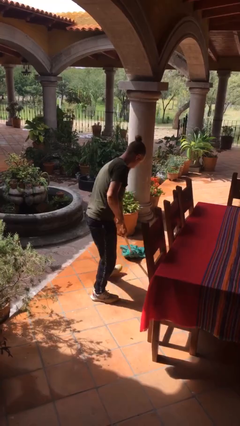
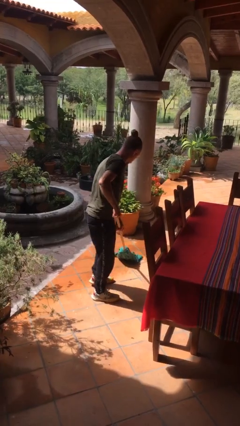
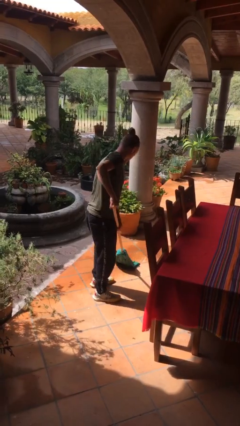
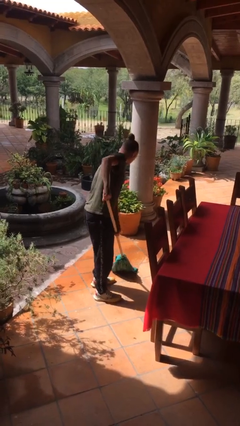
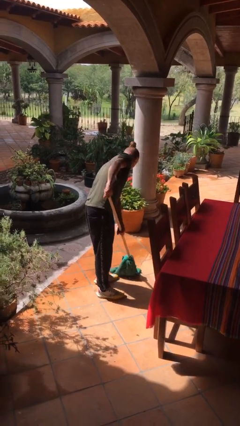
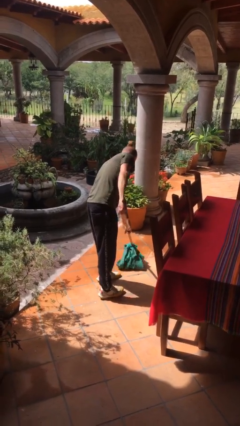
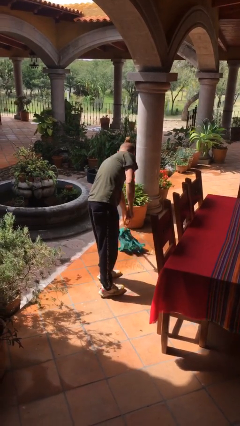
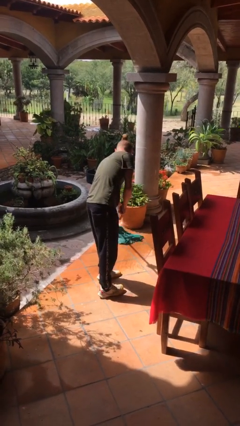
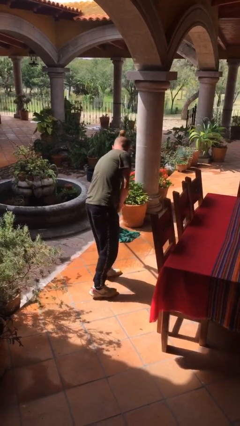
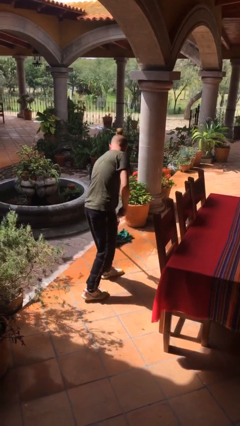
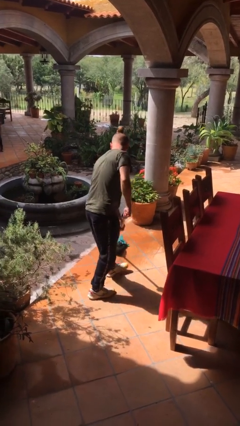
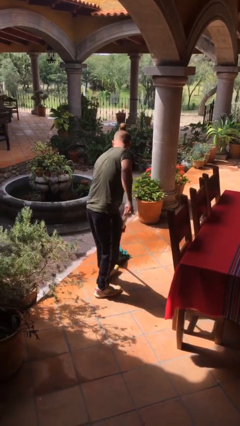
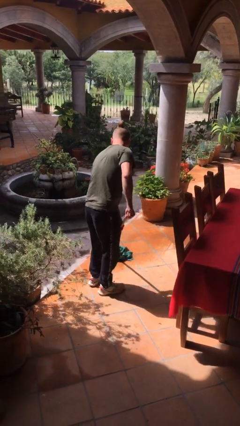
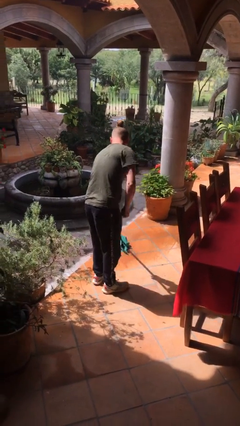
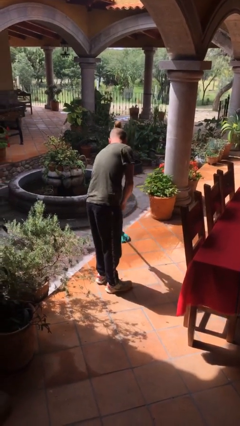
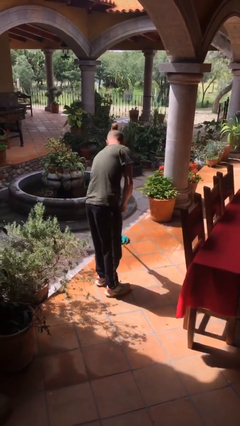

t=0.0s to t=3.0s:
person mops

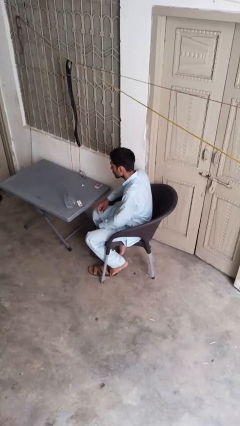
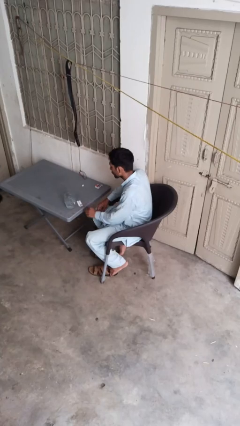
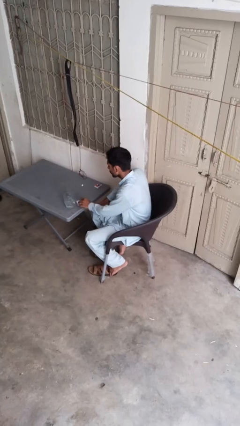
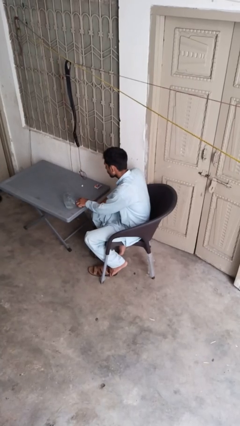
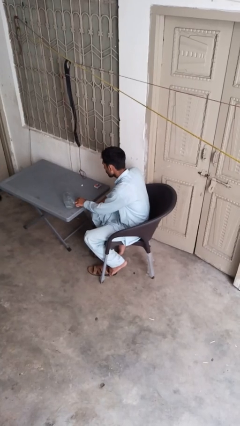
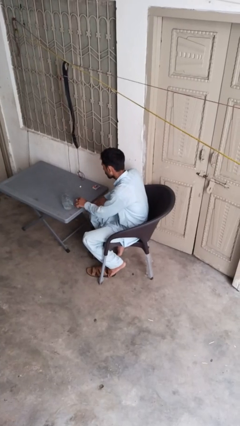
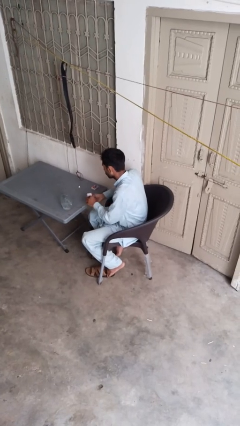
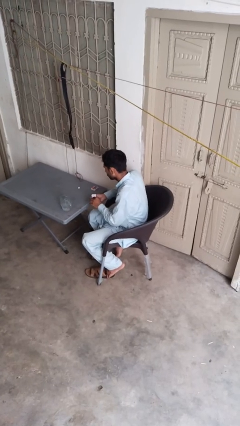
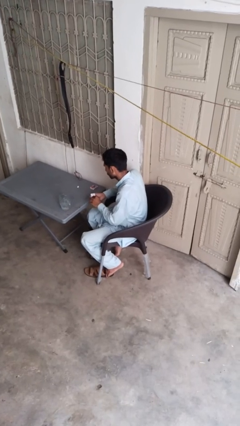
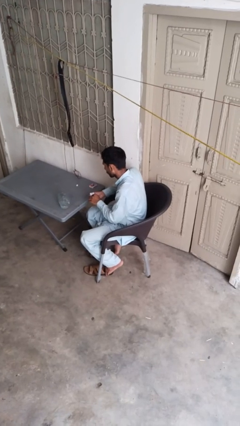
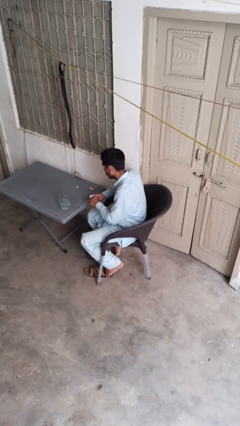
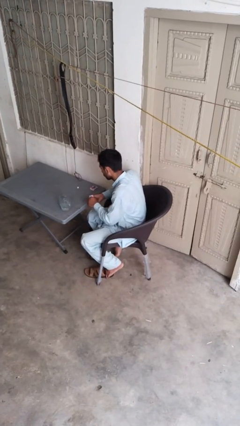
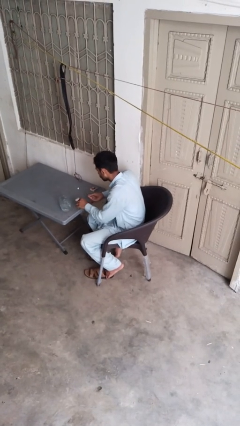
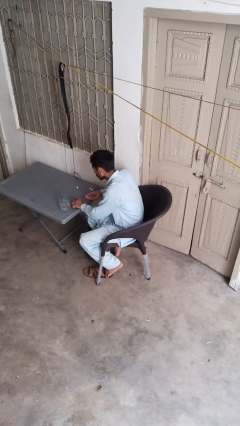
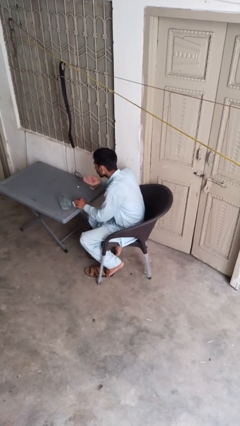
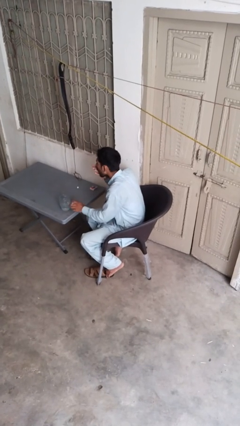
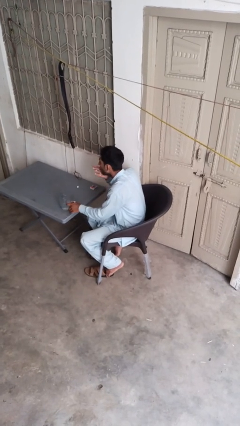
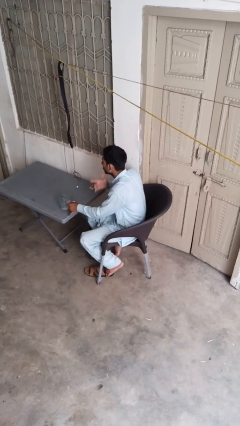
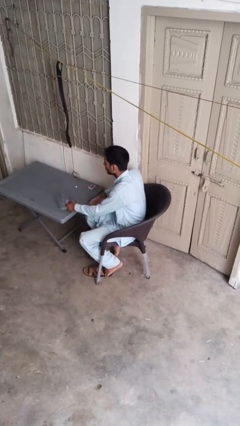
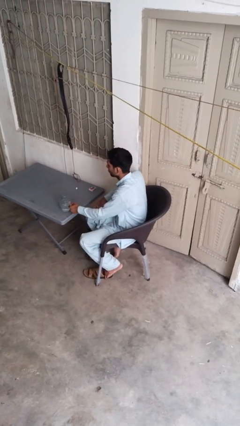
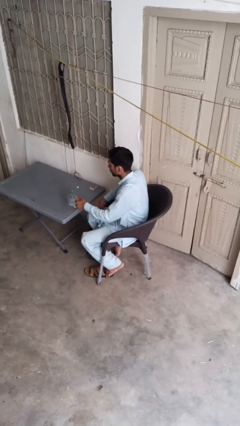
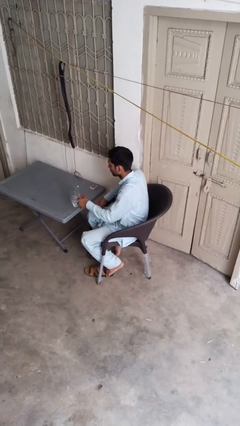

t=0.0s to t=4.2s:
person takes medicine pills

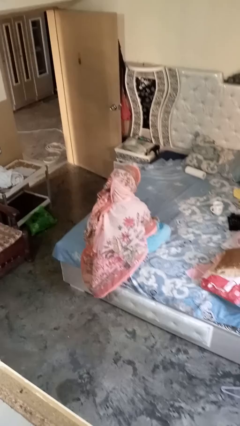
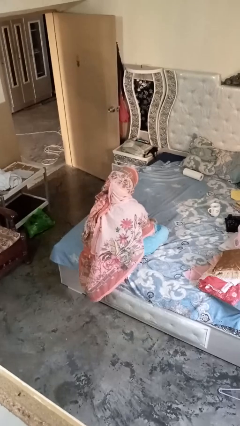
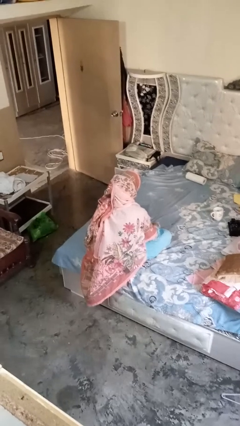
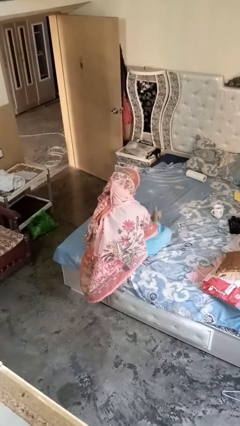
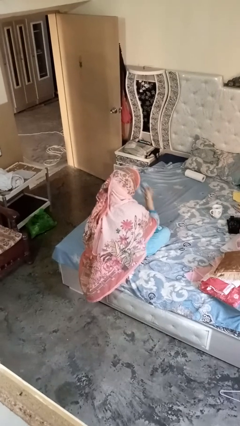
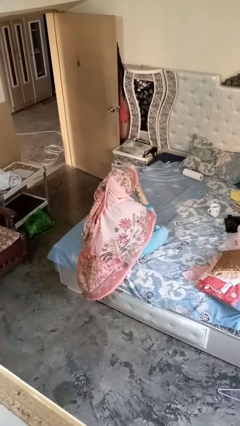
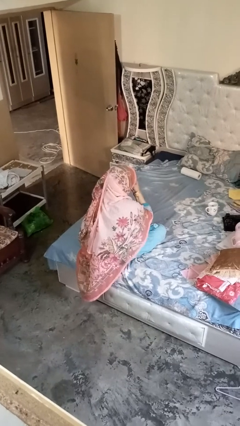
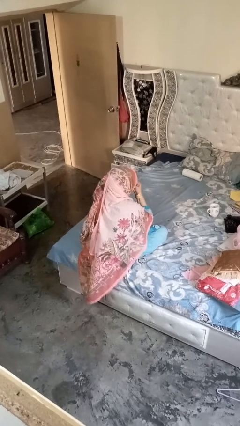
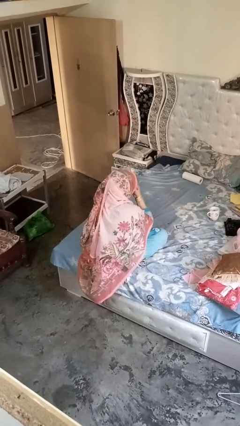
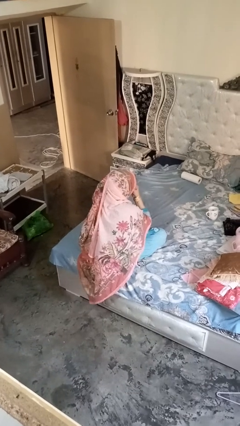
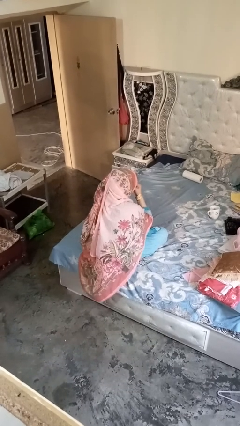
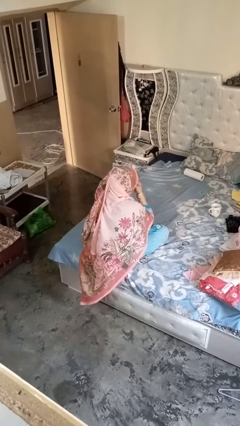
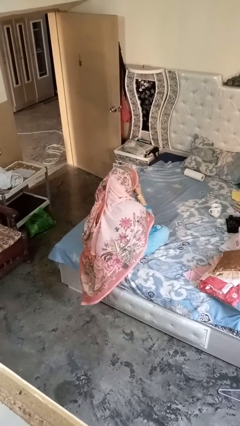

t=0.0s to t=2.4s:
person blows nose

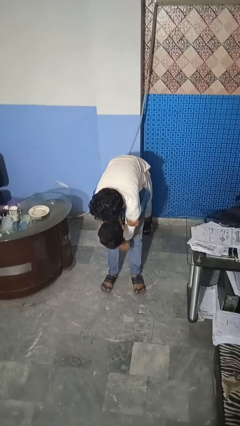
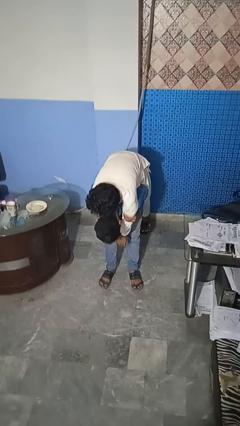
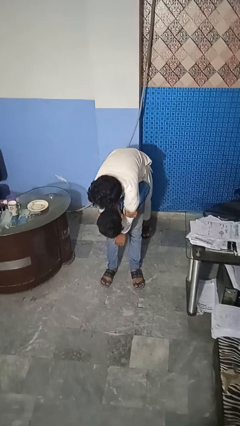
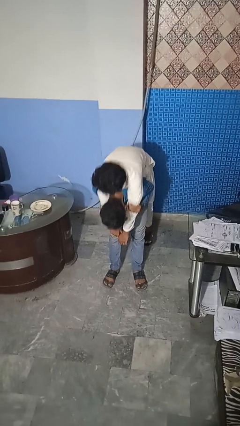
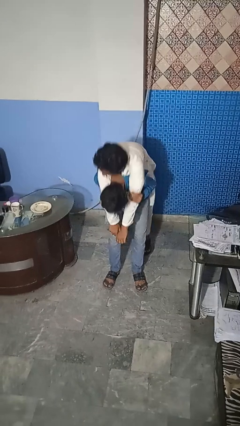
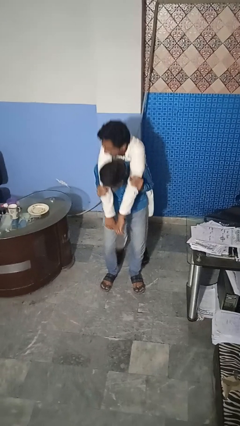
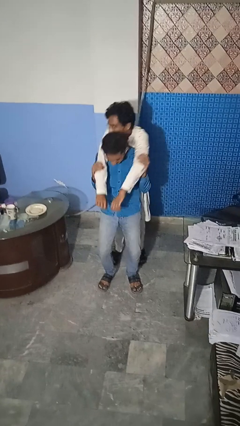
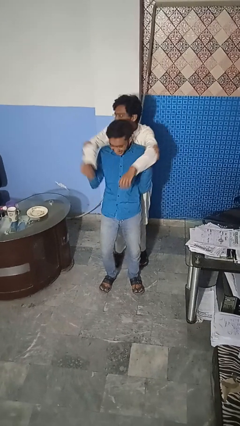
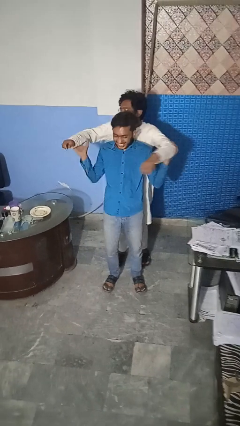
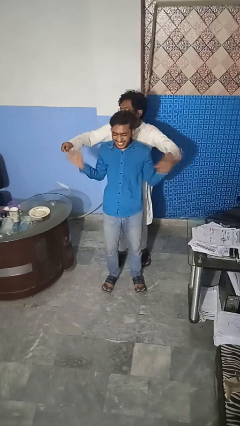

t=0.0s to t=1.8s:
person puts down person

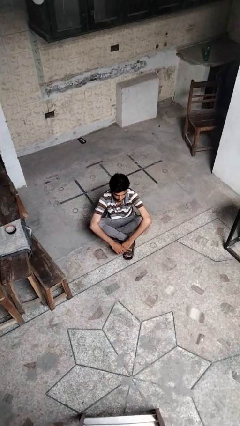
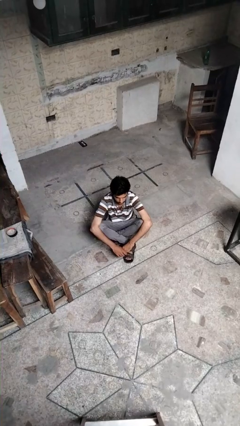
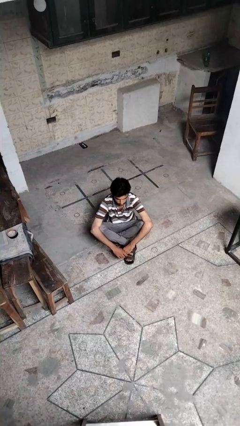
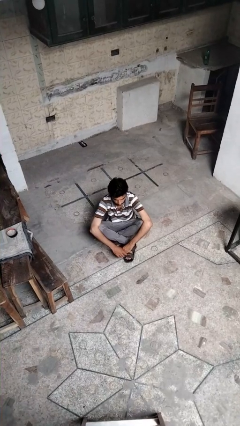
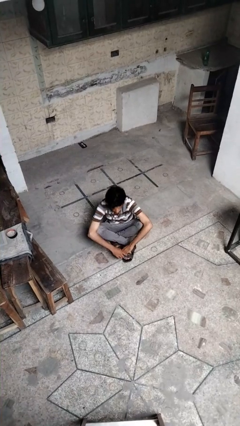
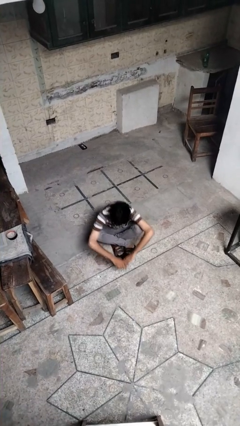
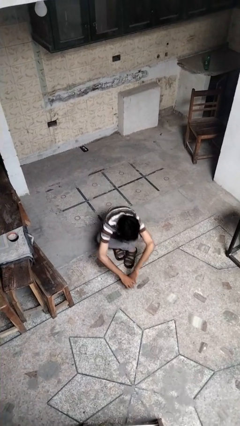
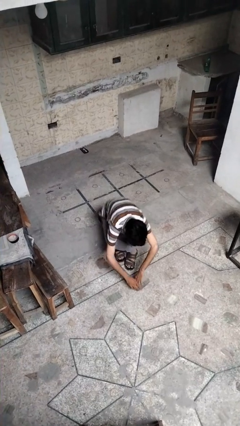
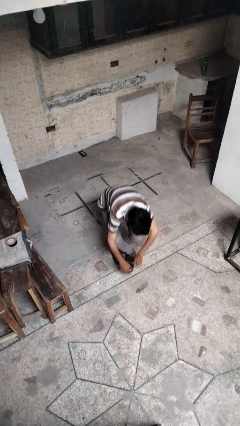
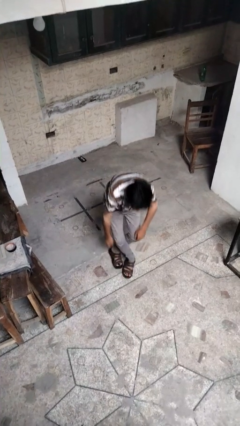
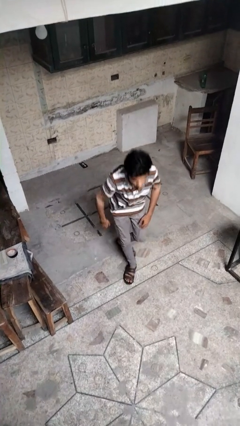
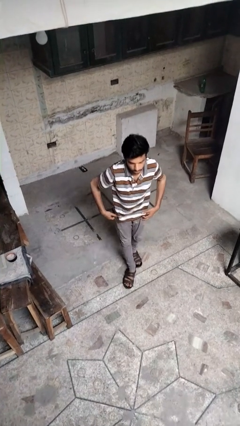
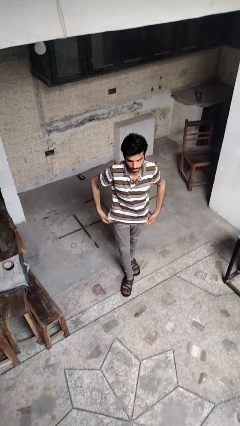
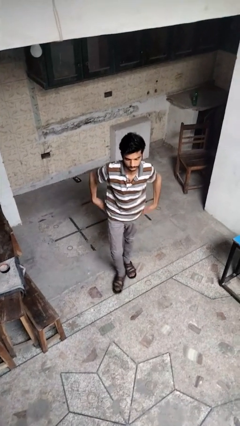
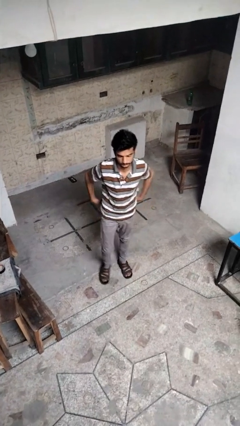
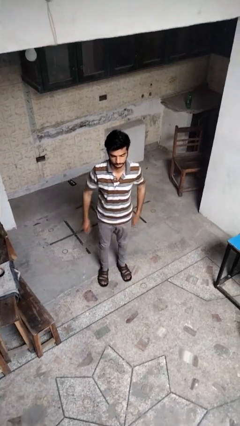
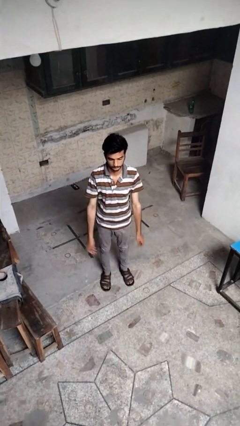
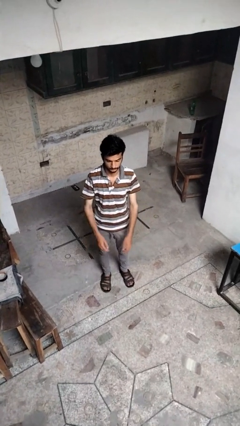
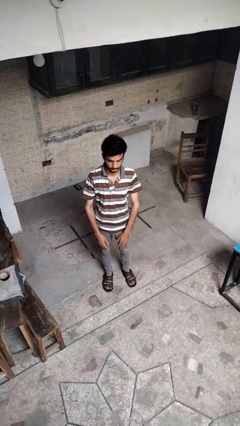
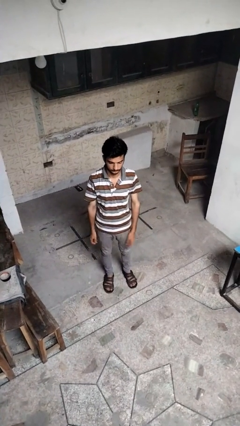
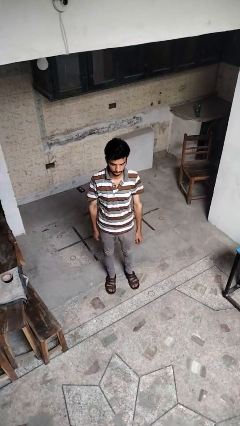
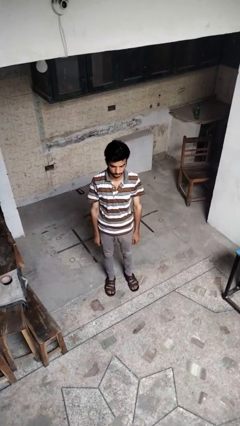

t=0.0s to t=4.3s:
person stands up from floor

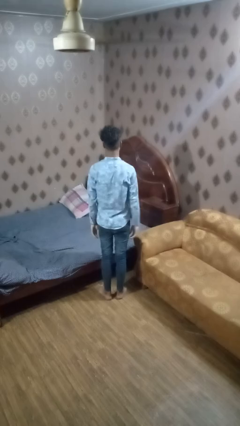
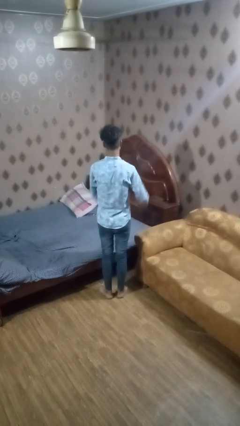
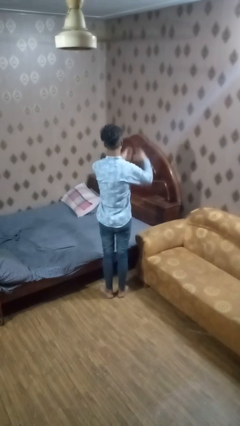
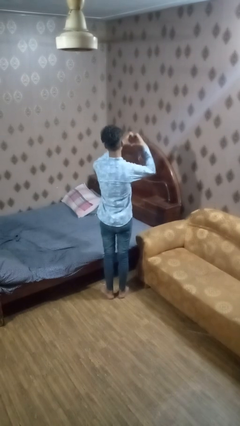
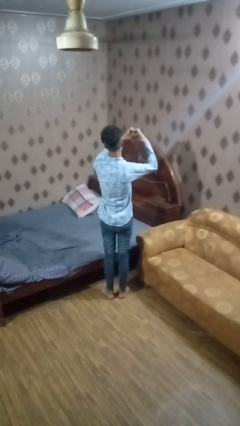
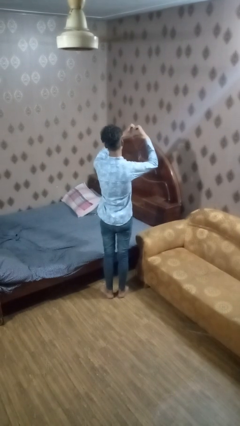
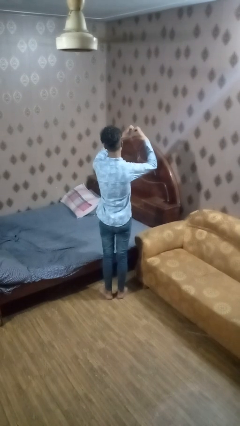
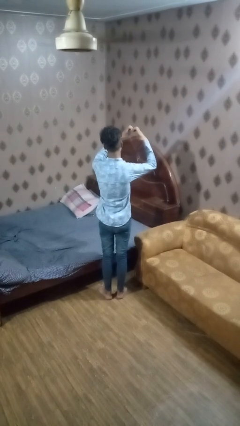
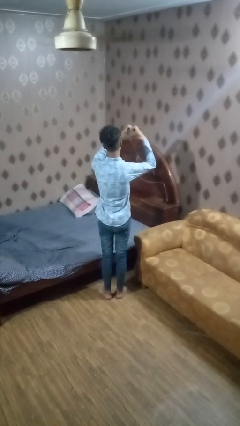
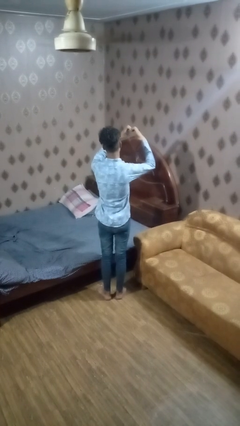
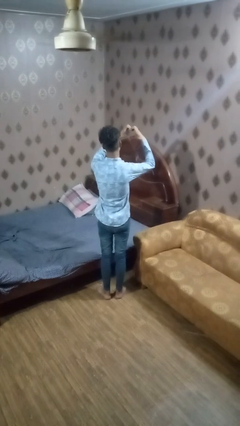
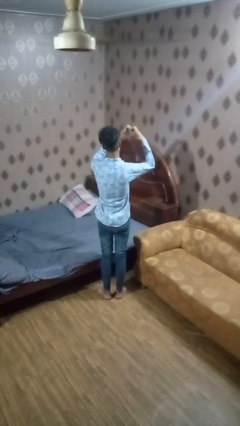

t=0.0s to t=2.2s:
person gestures heart
